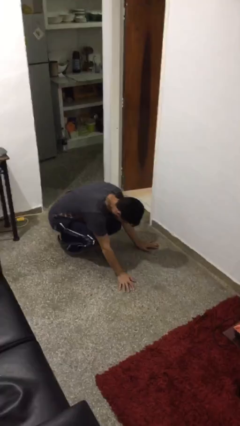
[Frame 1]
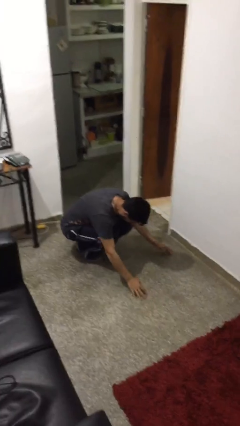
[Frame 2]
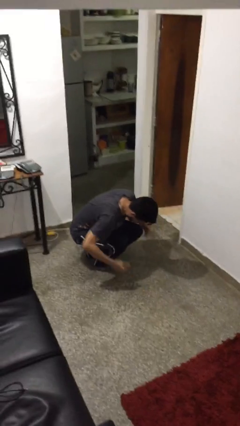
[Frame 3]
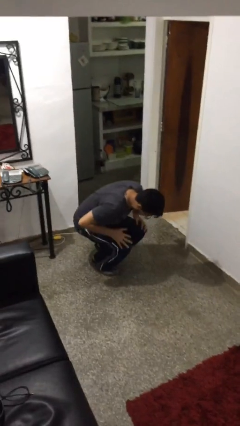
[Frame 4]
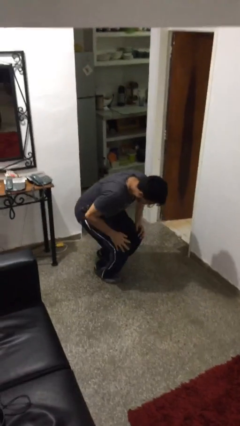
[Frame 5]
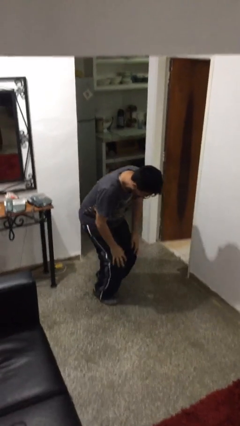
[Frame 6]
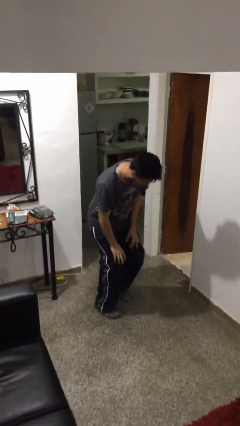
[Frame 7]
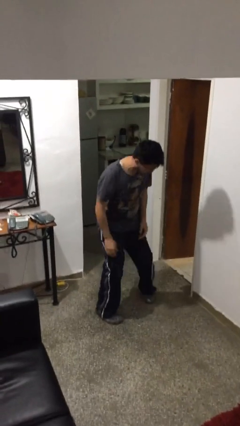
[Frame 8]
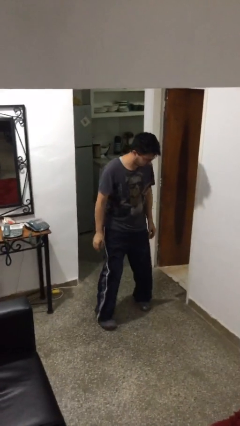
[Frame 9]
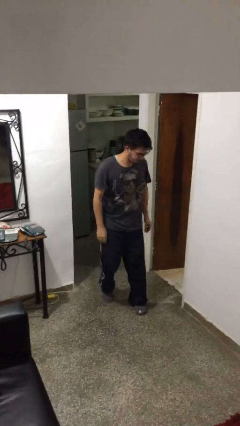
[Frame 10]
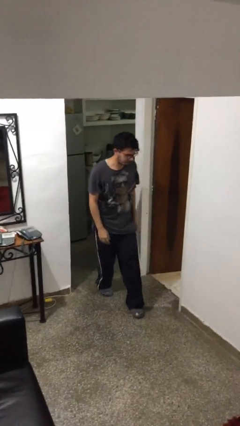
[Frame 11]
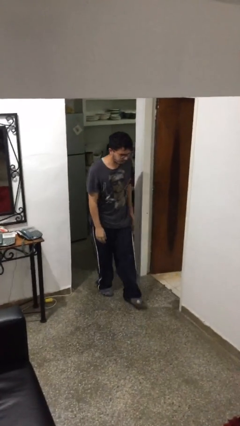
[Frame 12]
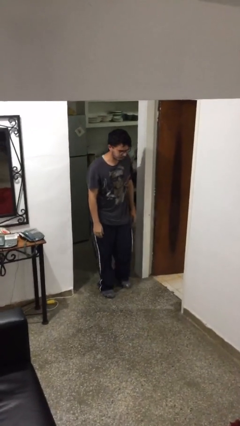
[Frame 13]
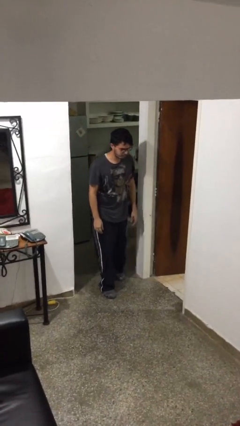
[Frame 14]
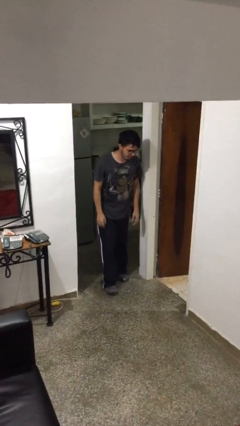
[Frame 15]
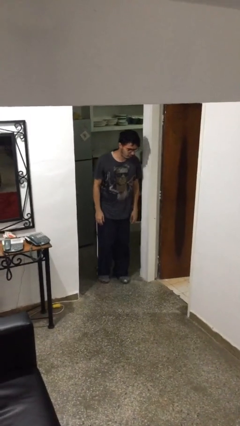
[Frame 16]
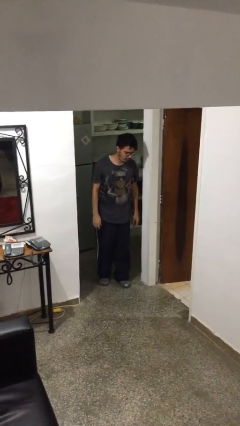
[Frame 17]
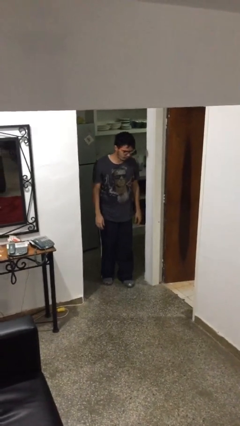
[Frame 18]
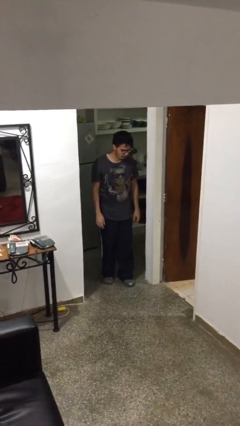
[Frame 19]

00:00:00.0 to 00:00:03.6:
person stands up from floor

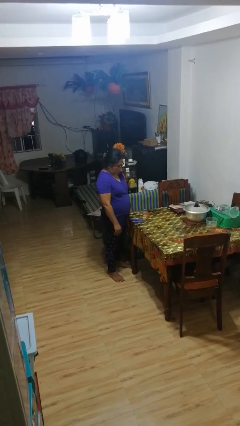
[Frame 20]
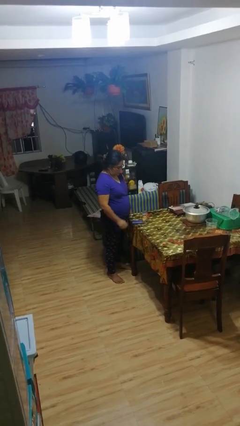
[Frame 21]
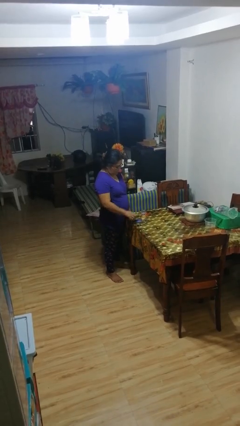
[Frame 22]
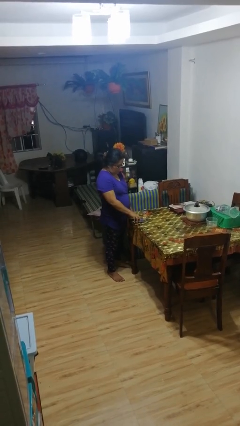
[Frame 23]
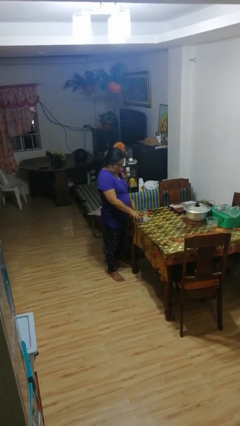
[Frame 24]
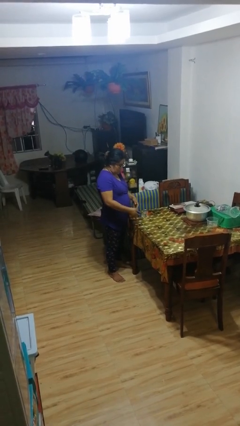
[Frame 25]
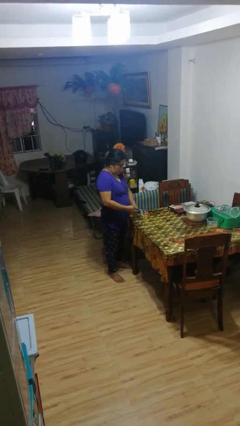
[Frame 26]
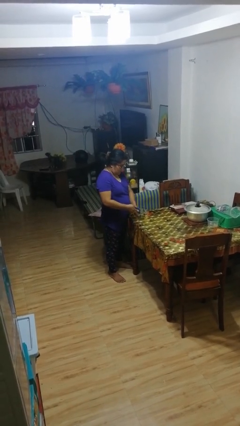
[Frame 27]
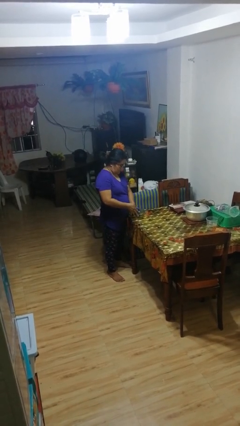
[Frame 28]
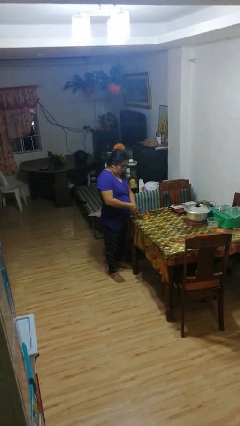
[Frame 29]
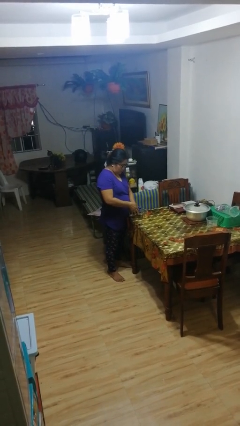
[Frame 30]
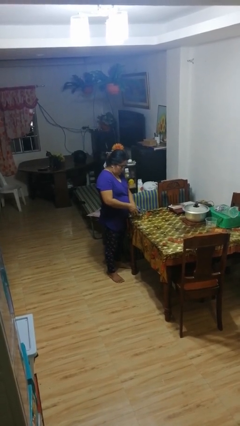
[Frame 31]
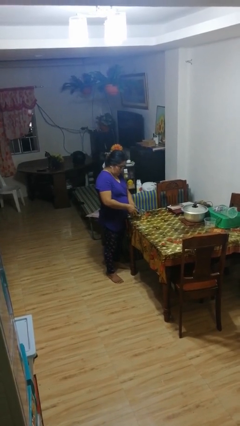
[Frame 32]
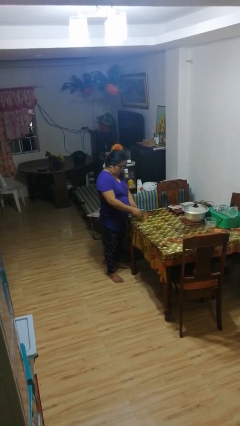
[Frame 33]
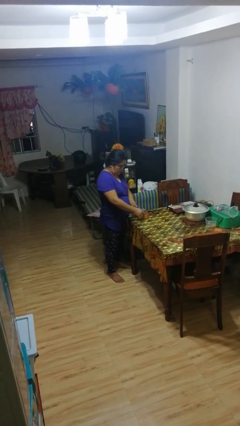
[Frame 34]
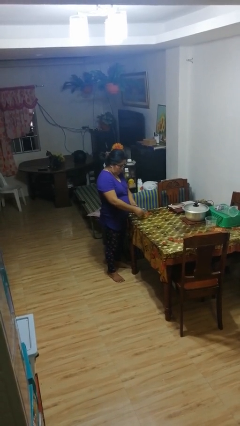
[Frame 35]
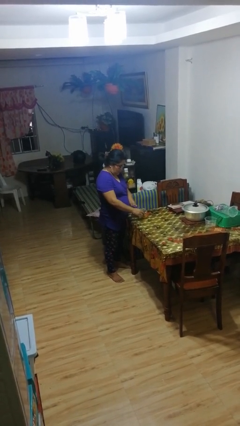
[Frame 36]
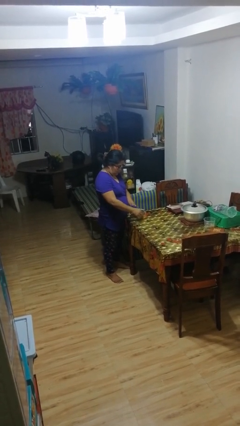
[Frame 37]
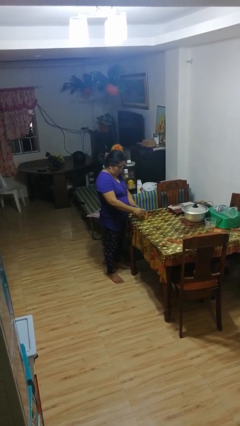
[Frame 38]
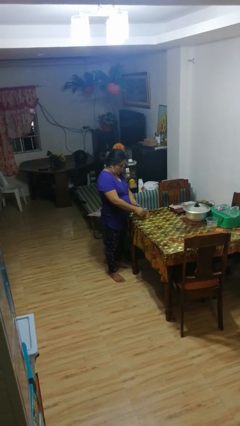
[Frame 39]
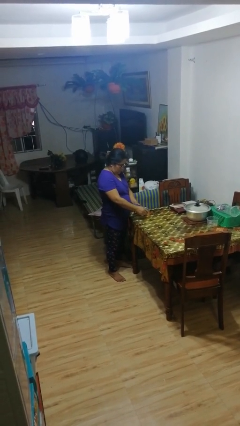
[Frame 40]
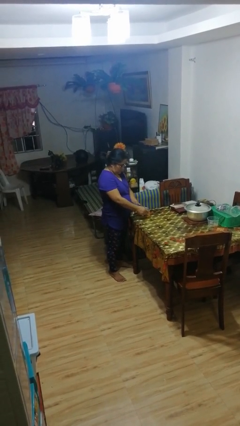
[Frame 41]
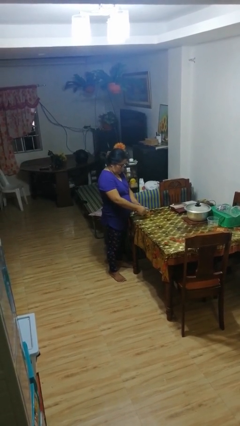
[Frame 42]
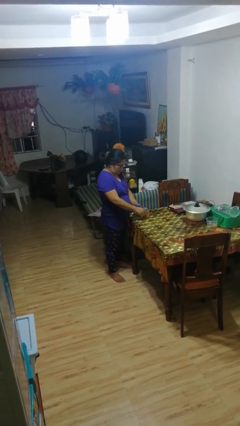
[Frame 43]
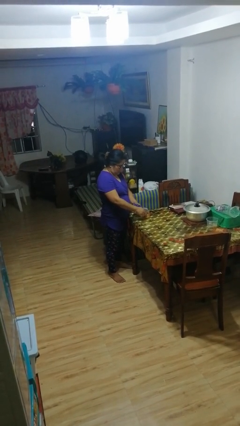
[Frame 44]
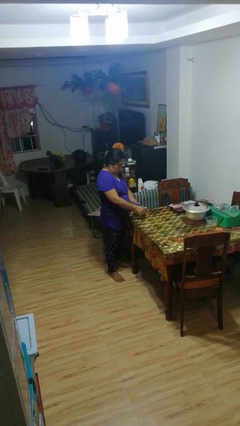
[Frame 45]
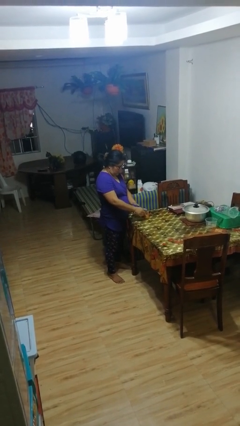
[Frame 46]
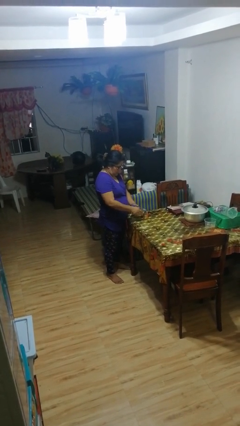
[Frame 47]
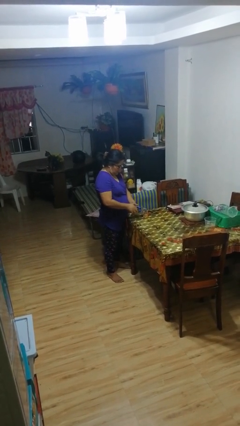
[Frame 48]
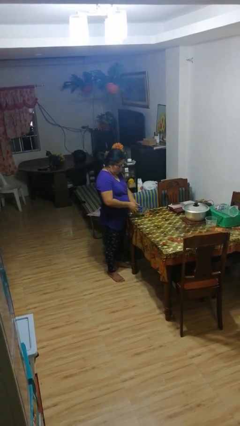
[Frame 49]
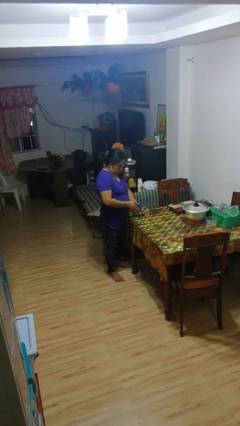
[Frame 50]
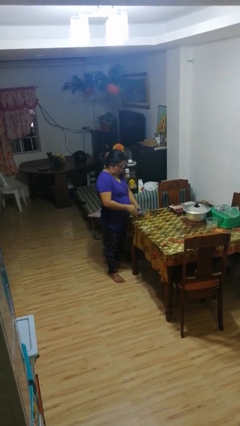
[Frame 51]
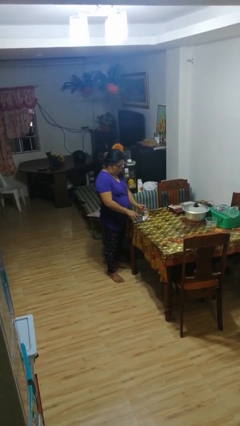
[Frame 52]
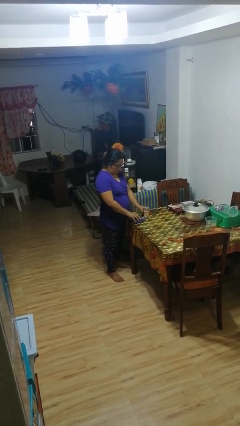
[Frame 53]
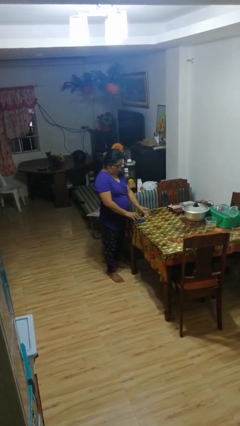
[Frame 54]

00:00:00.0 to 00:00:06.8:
person opens can with can opener

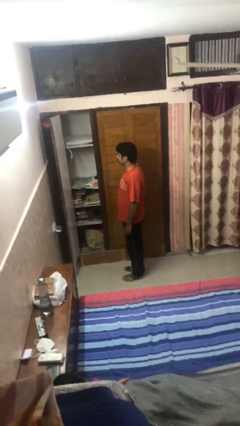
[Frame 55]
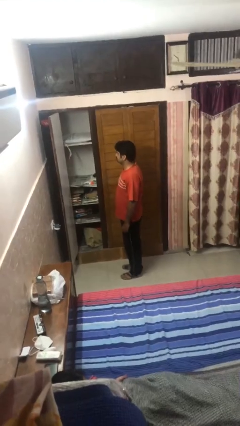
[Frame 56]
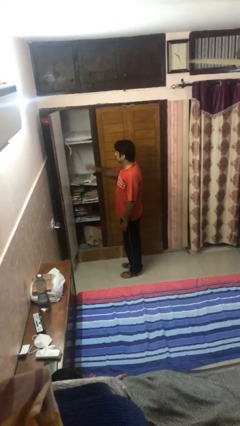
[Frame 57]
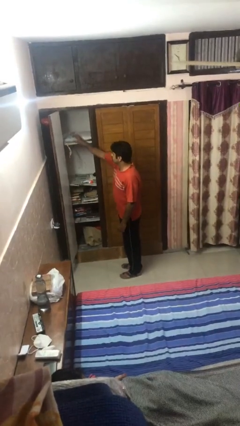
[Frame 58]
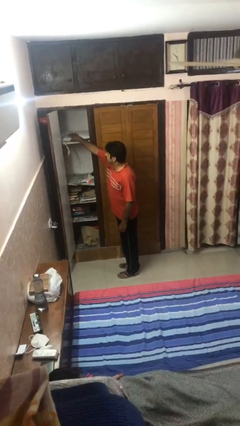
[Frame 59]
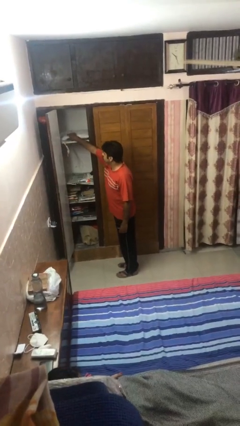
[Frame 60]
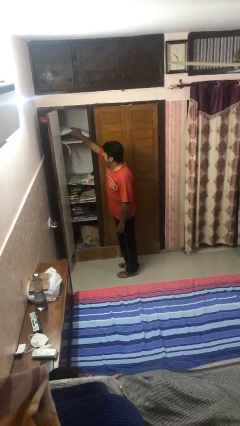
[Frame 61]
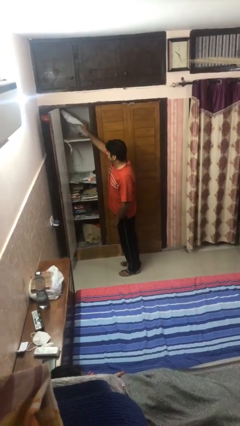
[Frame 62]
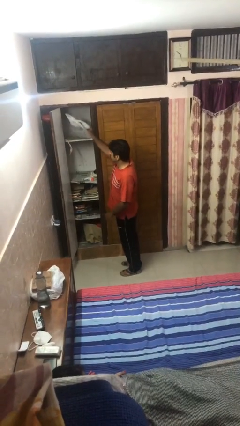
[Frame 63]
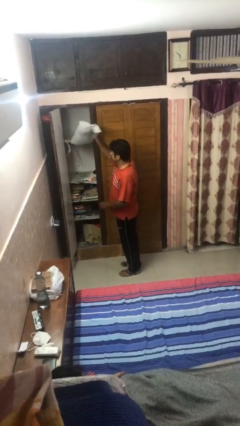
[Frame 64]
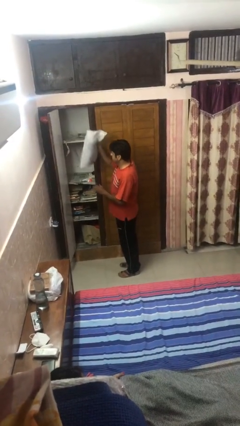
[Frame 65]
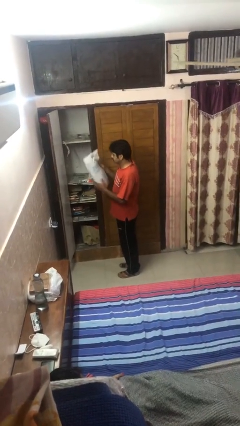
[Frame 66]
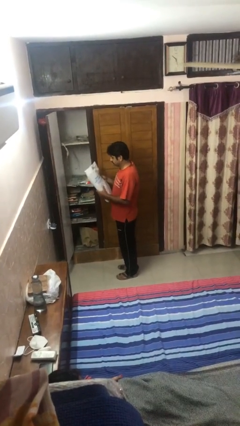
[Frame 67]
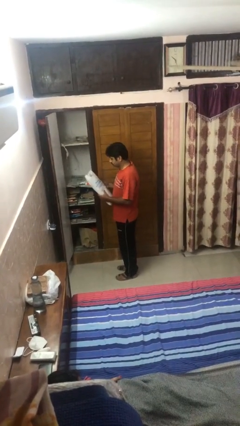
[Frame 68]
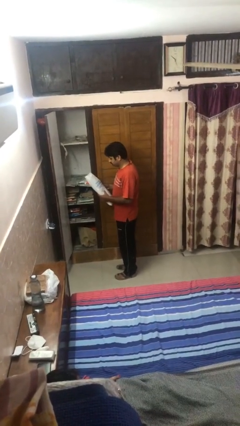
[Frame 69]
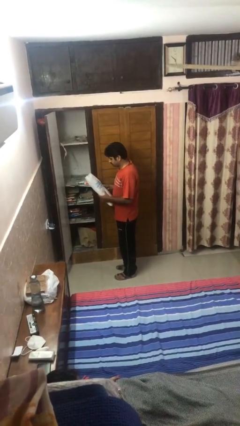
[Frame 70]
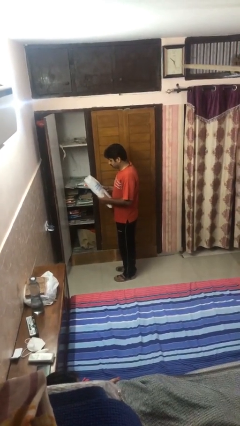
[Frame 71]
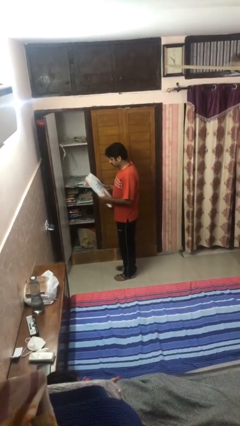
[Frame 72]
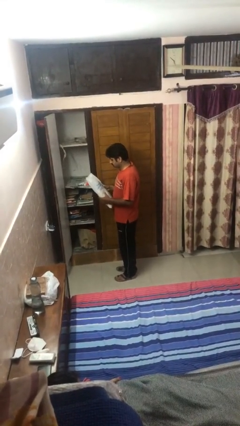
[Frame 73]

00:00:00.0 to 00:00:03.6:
person picks up object from shelf

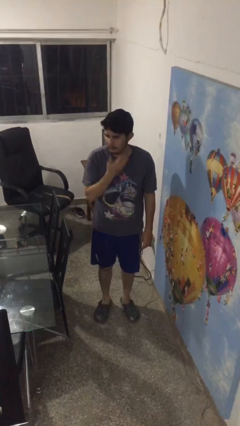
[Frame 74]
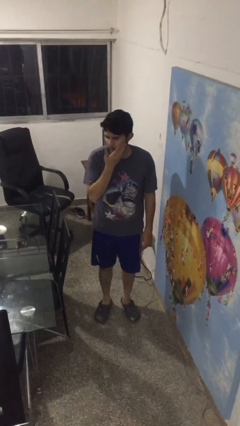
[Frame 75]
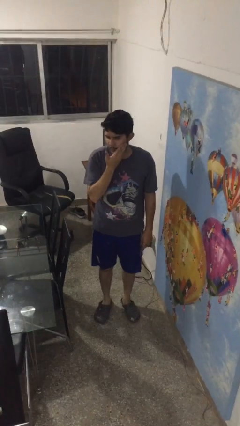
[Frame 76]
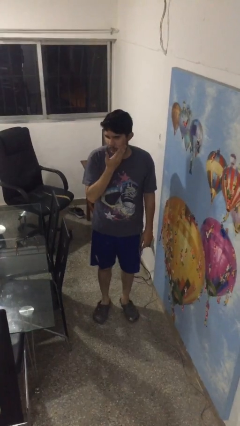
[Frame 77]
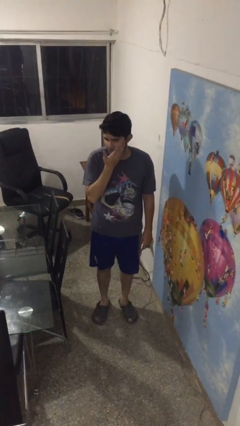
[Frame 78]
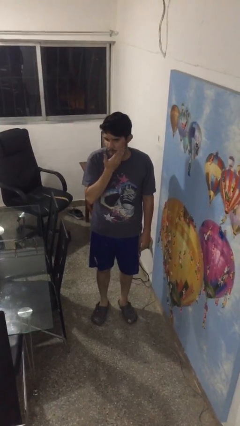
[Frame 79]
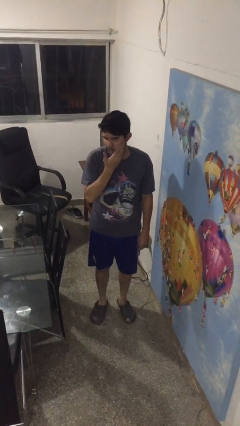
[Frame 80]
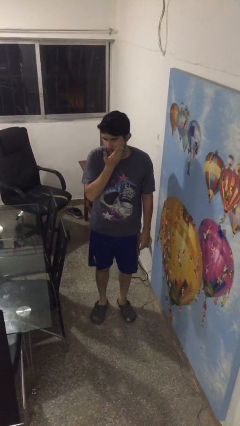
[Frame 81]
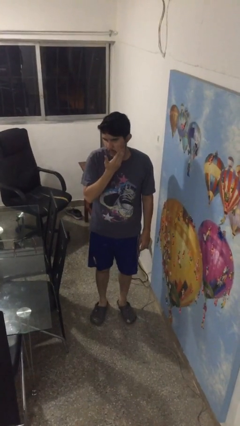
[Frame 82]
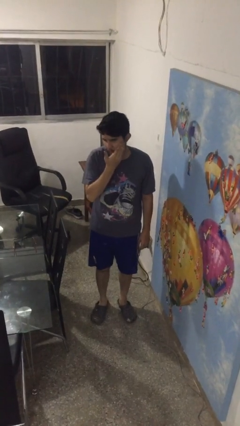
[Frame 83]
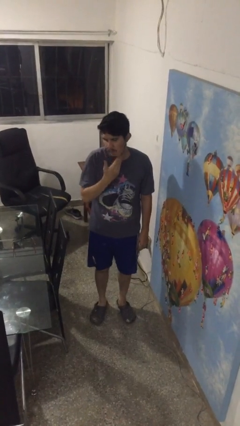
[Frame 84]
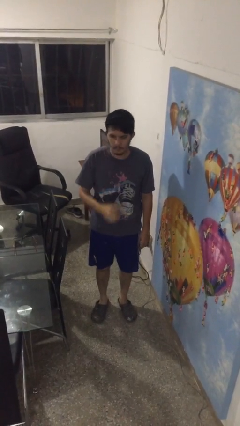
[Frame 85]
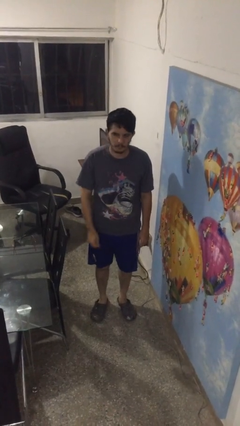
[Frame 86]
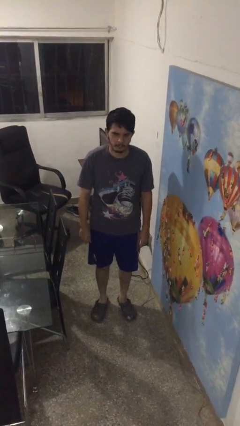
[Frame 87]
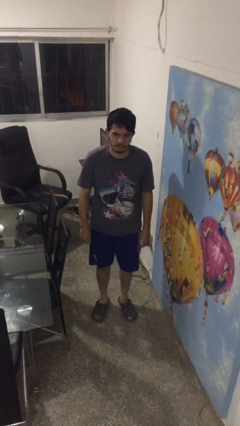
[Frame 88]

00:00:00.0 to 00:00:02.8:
person scratches face

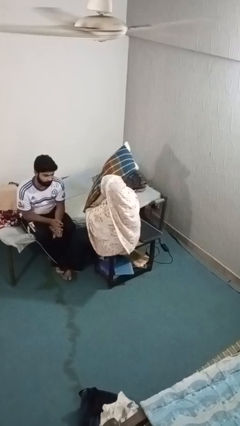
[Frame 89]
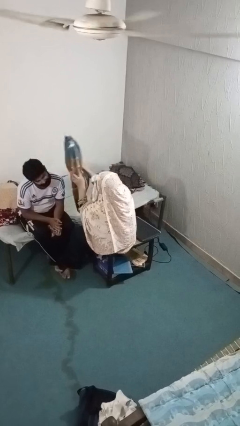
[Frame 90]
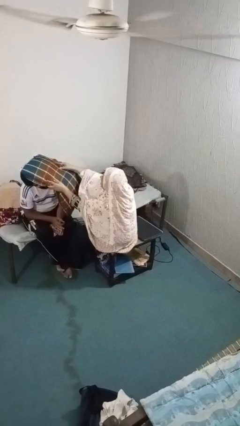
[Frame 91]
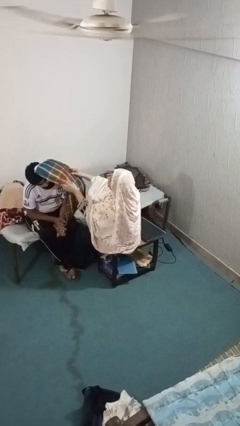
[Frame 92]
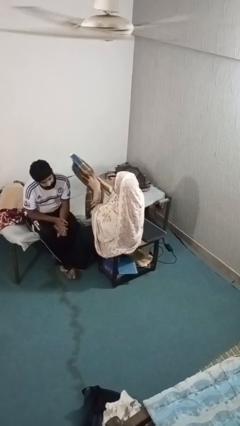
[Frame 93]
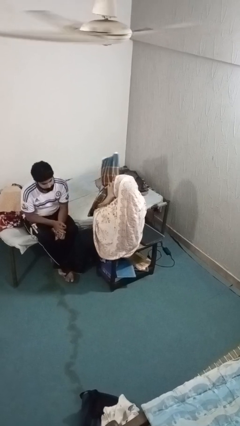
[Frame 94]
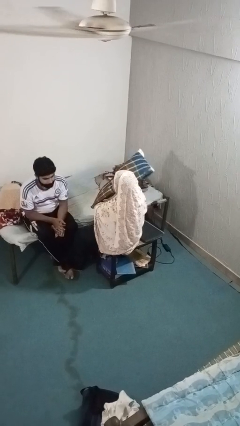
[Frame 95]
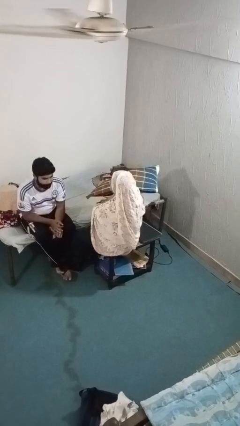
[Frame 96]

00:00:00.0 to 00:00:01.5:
person hits person with pillow
